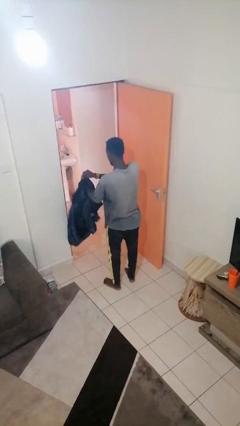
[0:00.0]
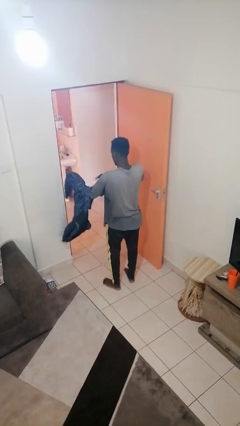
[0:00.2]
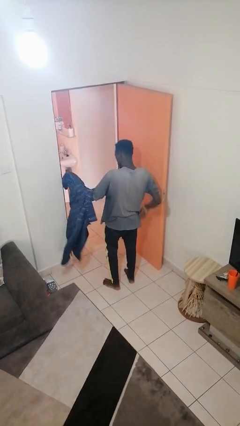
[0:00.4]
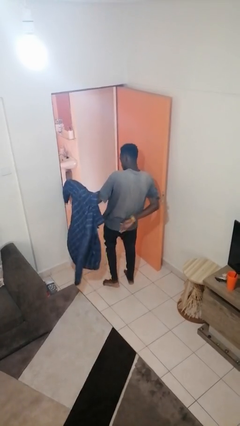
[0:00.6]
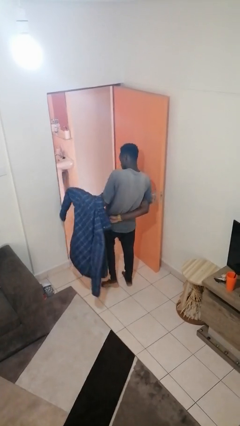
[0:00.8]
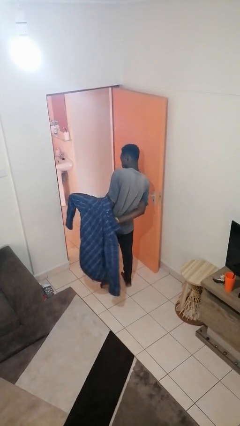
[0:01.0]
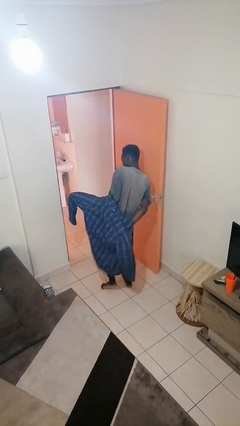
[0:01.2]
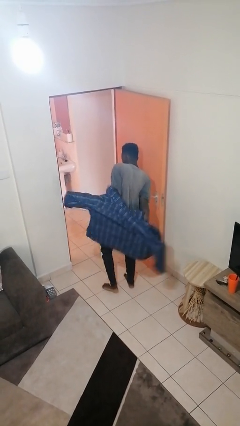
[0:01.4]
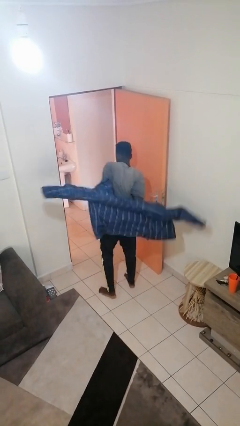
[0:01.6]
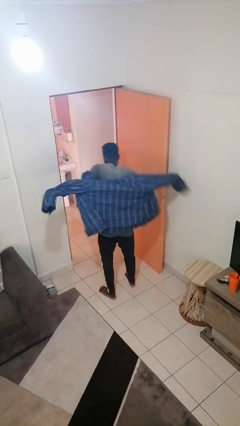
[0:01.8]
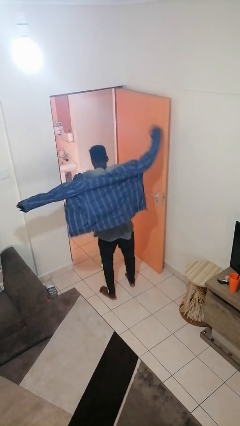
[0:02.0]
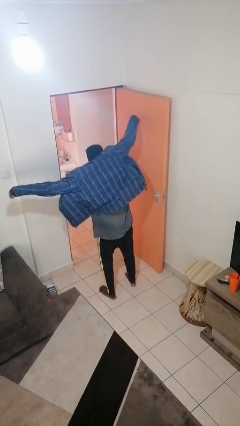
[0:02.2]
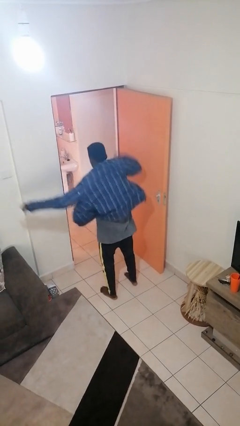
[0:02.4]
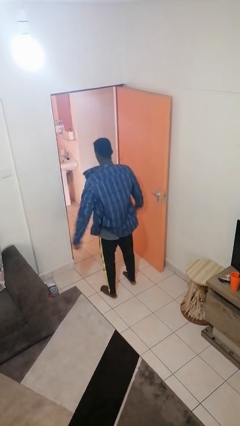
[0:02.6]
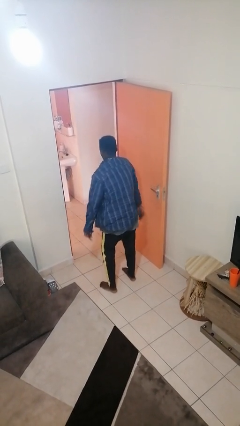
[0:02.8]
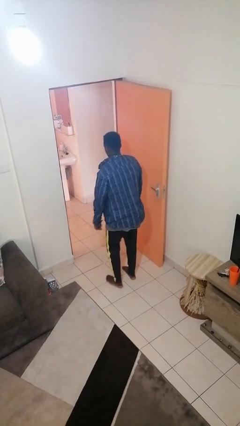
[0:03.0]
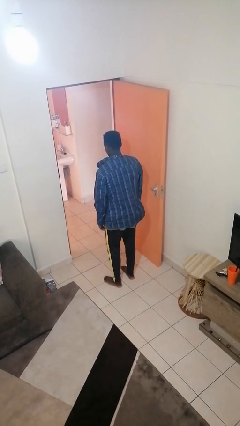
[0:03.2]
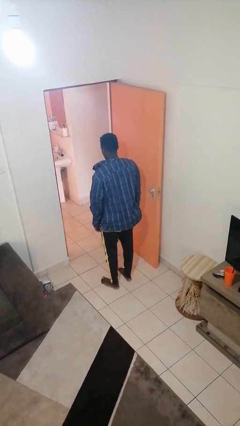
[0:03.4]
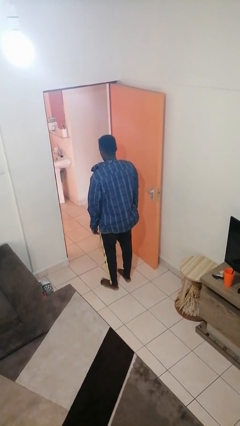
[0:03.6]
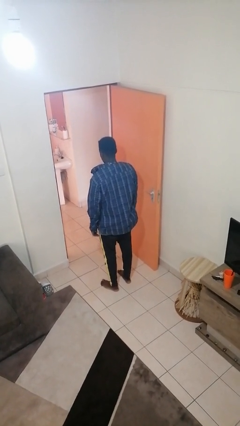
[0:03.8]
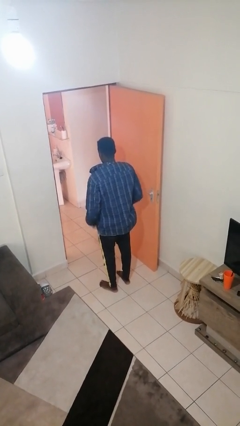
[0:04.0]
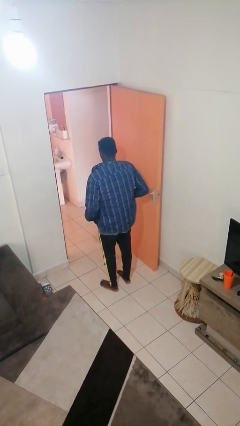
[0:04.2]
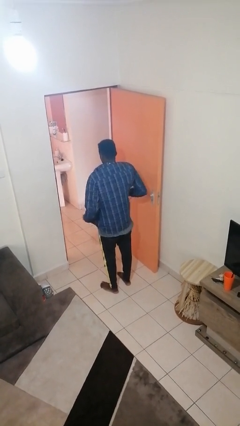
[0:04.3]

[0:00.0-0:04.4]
person puts on jacket

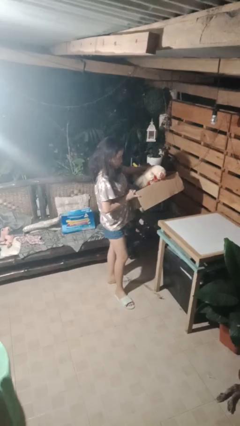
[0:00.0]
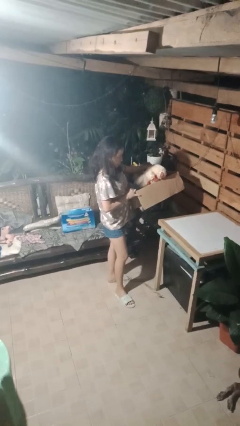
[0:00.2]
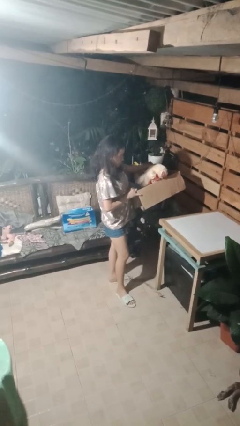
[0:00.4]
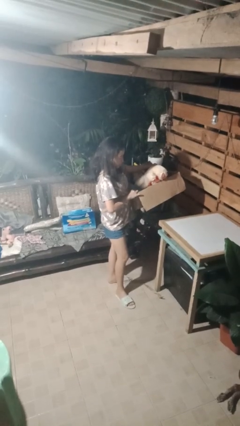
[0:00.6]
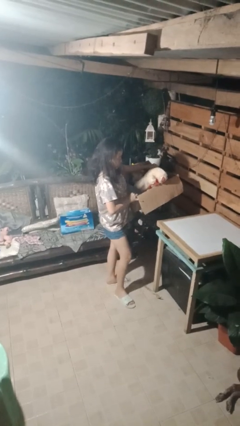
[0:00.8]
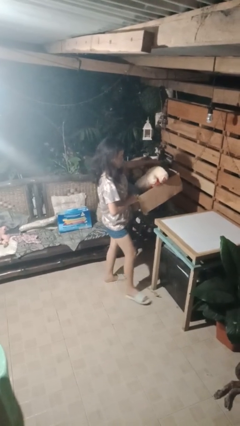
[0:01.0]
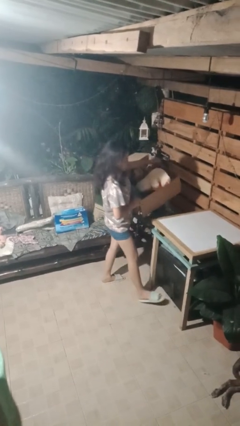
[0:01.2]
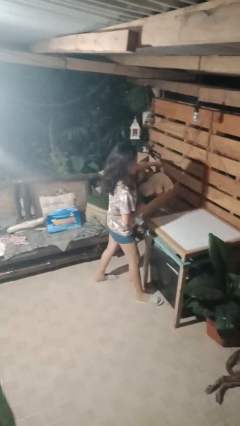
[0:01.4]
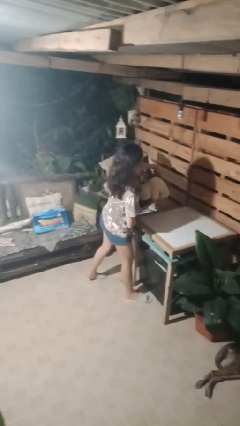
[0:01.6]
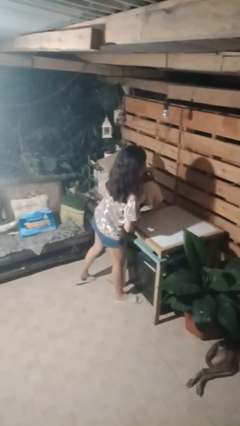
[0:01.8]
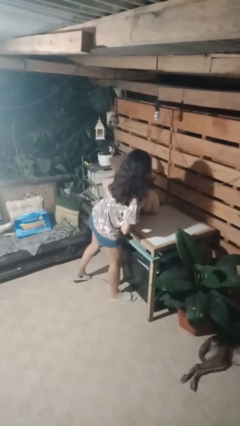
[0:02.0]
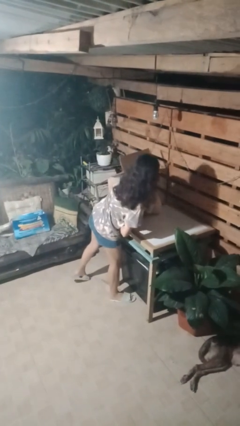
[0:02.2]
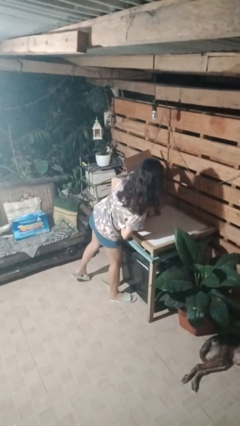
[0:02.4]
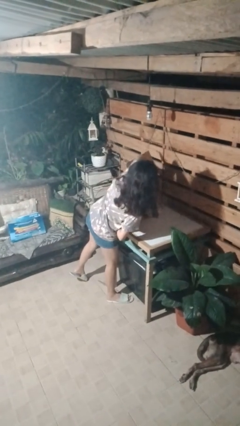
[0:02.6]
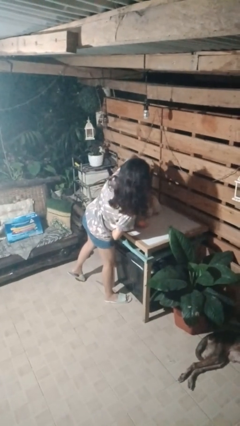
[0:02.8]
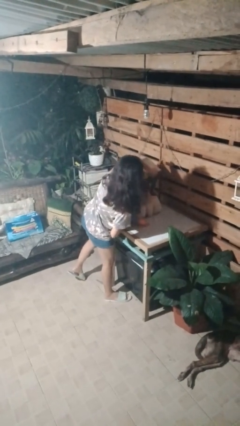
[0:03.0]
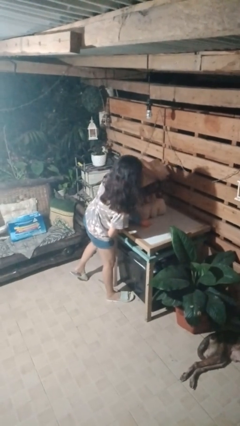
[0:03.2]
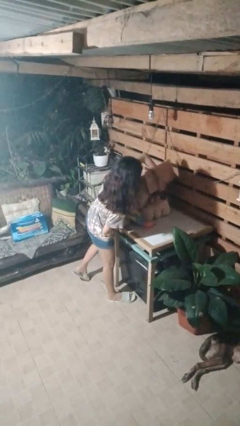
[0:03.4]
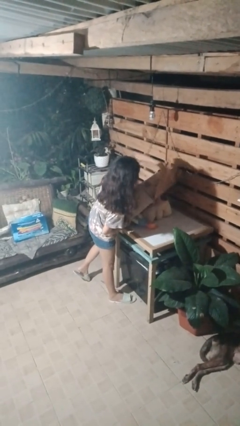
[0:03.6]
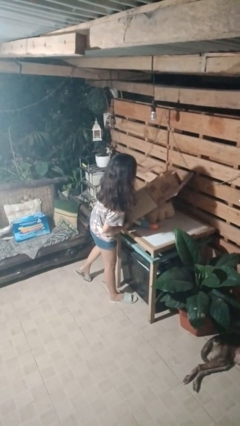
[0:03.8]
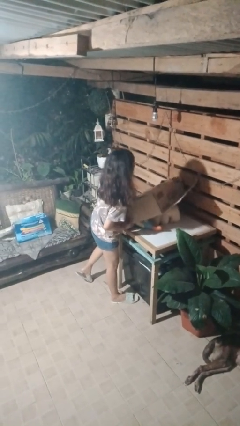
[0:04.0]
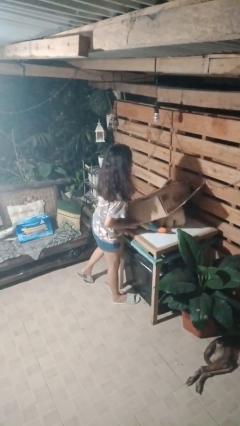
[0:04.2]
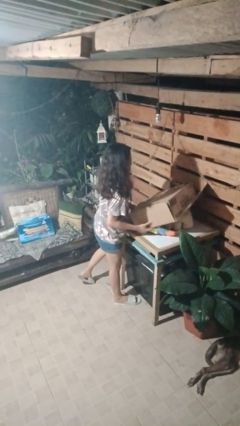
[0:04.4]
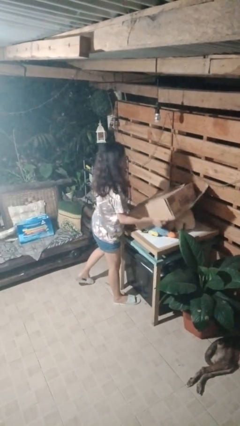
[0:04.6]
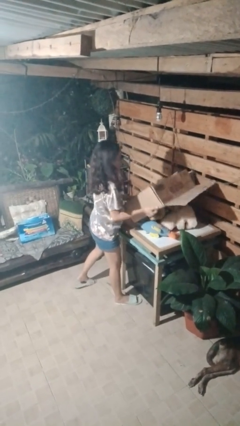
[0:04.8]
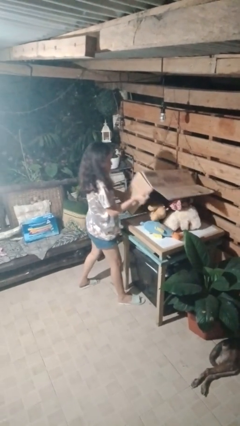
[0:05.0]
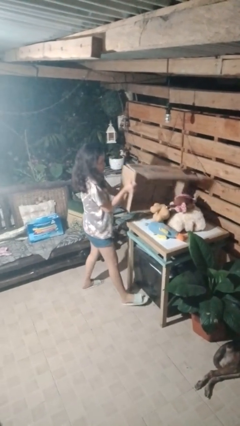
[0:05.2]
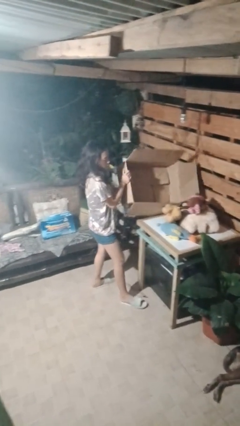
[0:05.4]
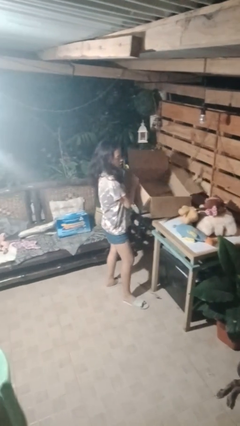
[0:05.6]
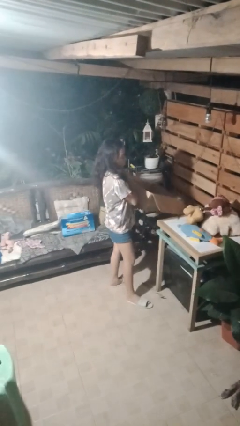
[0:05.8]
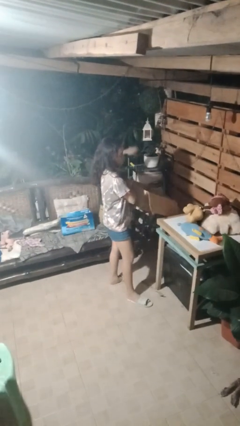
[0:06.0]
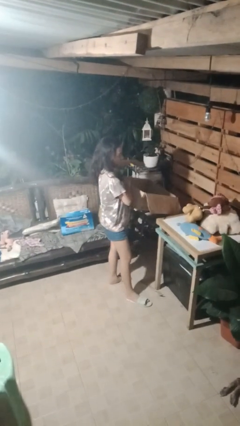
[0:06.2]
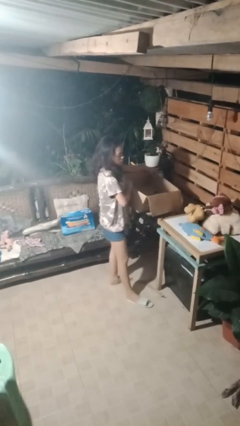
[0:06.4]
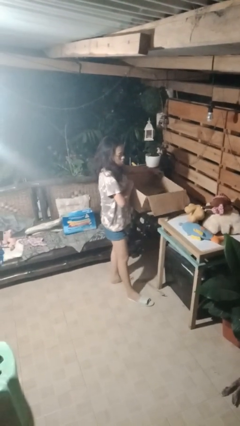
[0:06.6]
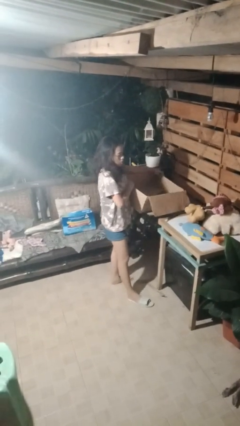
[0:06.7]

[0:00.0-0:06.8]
person unloads box onto table

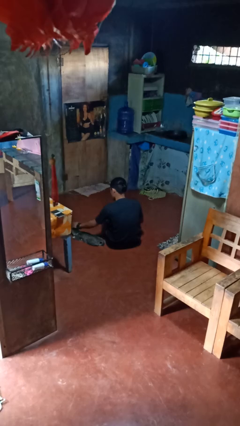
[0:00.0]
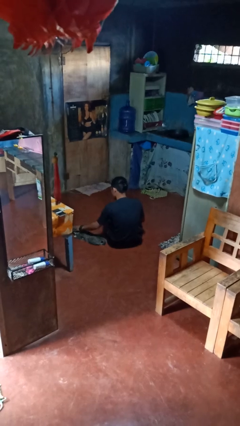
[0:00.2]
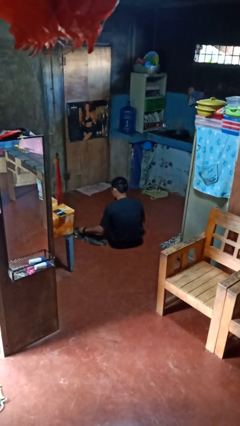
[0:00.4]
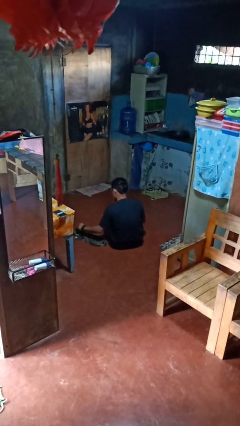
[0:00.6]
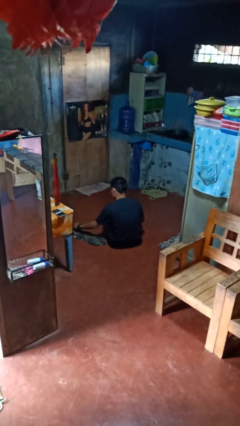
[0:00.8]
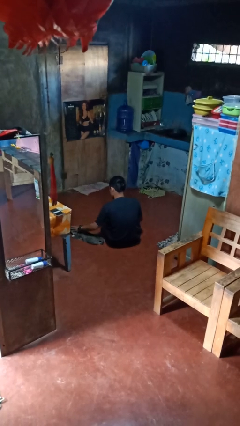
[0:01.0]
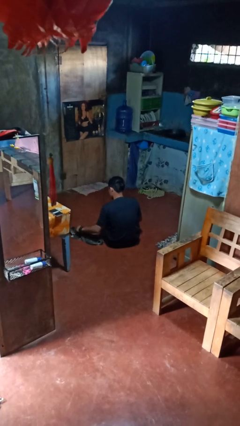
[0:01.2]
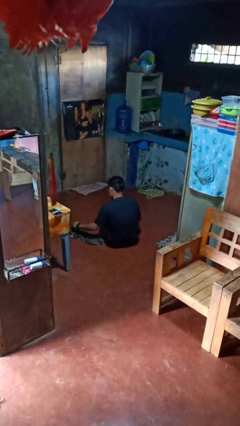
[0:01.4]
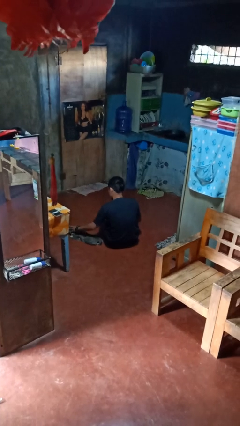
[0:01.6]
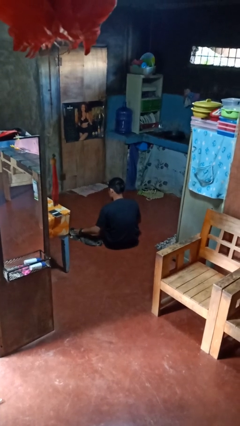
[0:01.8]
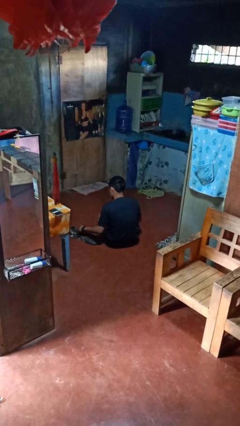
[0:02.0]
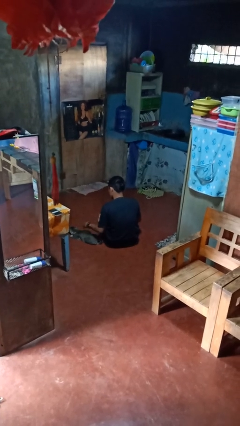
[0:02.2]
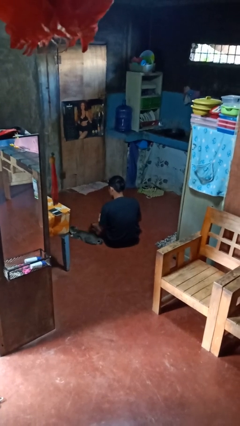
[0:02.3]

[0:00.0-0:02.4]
person pets cat

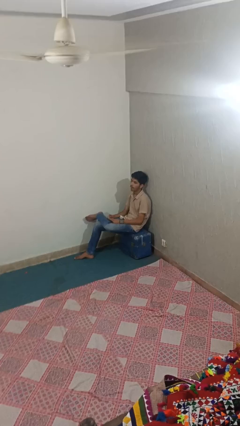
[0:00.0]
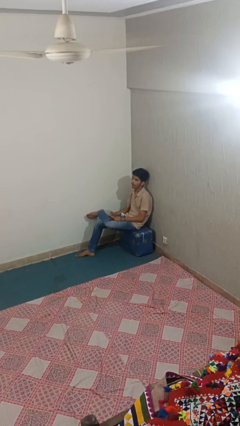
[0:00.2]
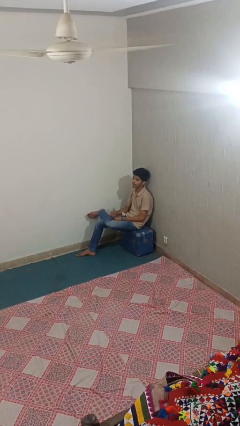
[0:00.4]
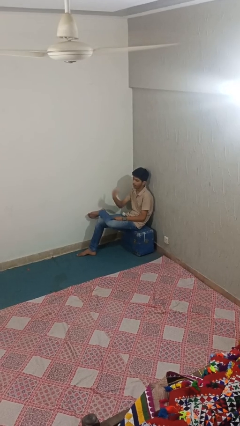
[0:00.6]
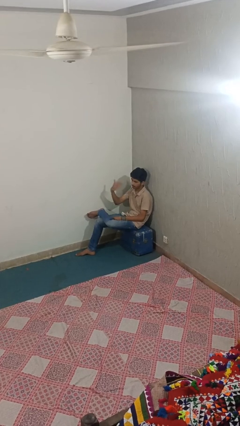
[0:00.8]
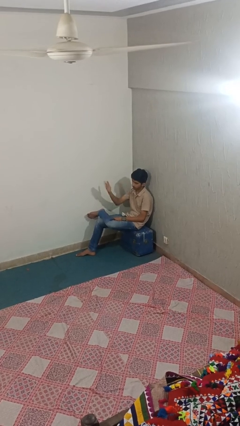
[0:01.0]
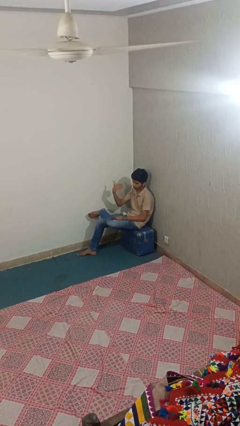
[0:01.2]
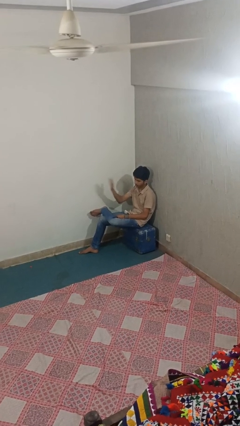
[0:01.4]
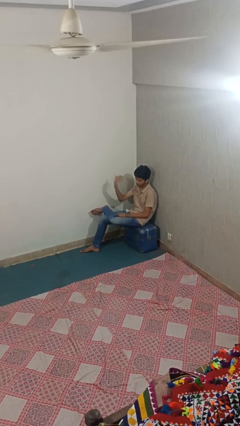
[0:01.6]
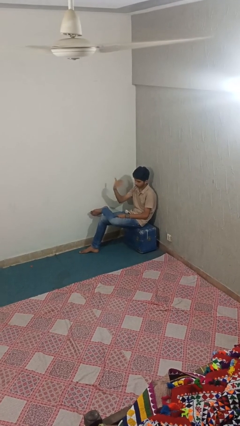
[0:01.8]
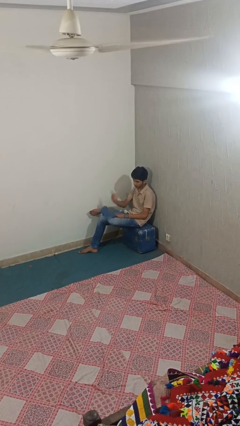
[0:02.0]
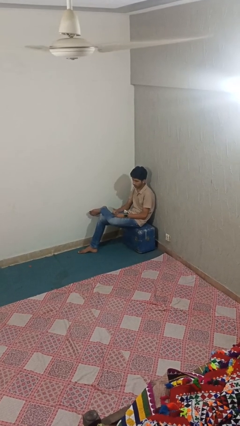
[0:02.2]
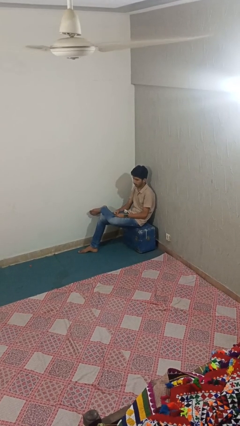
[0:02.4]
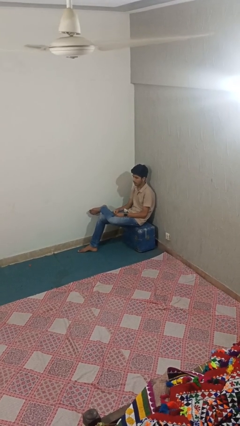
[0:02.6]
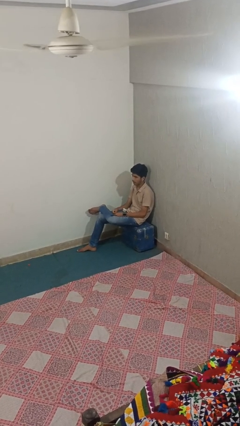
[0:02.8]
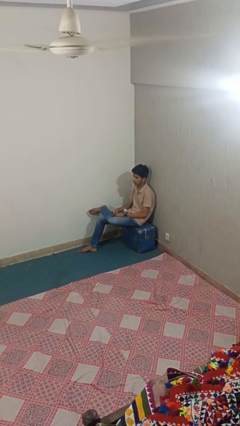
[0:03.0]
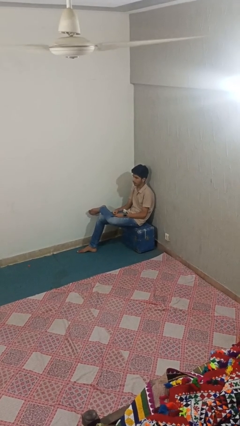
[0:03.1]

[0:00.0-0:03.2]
person gestures come here

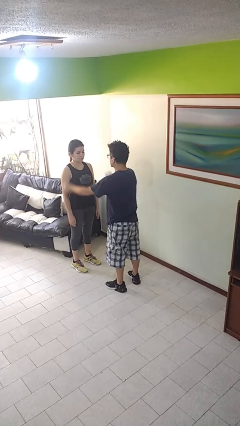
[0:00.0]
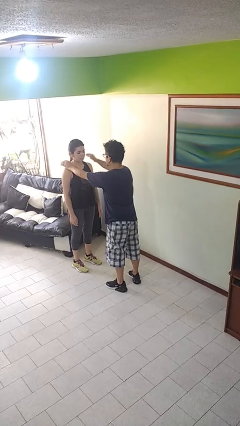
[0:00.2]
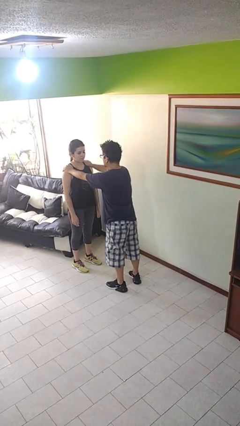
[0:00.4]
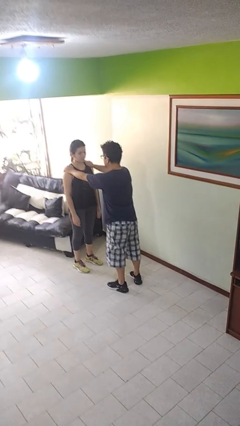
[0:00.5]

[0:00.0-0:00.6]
person grabs person by shoulder
